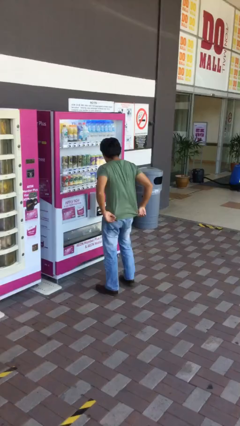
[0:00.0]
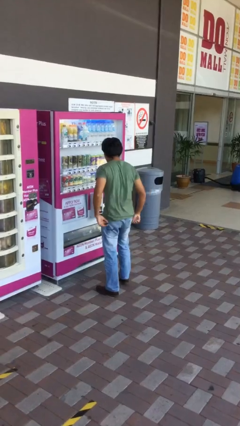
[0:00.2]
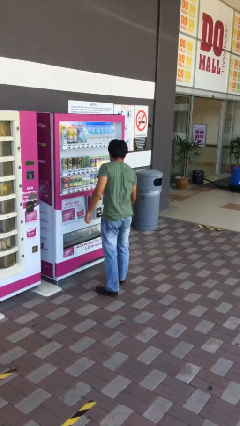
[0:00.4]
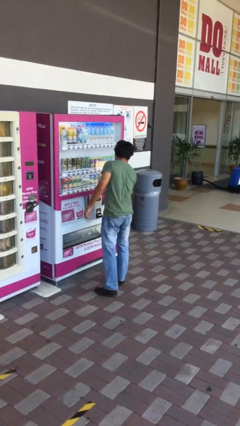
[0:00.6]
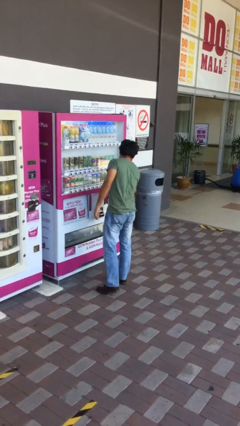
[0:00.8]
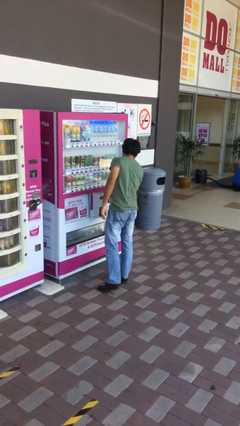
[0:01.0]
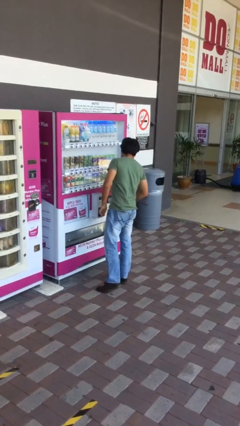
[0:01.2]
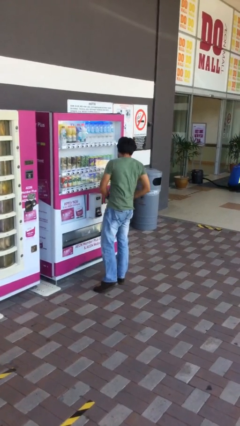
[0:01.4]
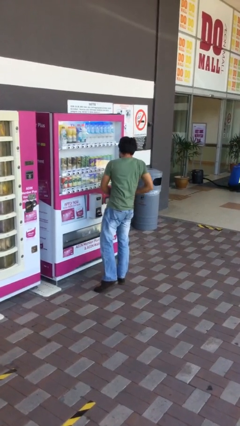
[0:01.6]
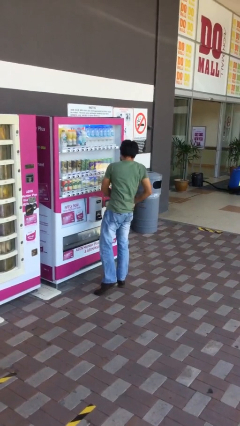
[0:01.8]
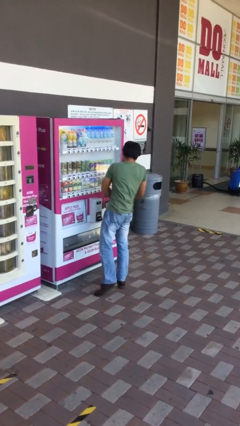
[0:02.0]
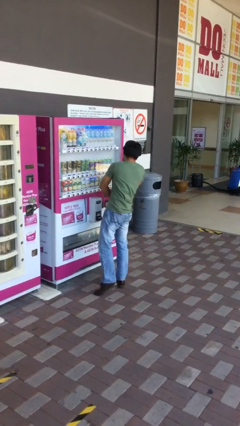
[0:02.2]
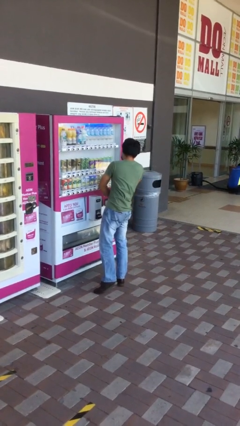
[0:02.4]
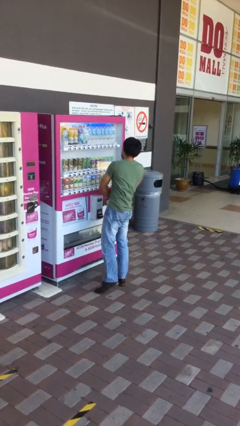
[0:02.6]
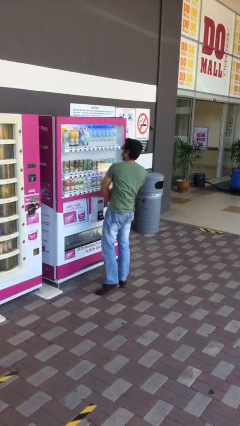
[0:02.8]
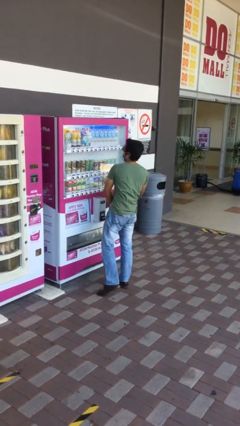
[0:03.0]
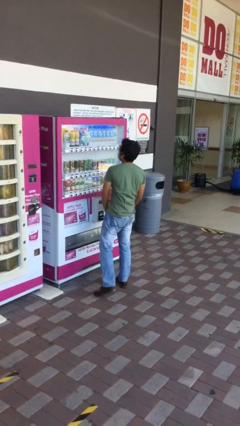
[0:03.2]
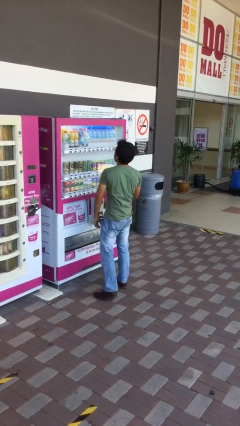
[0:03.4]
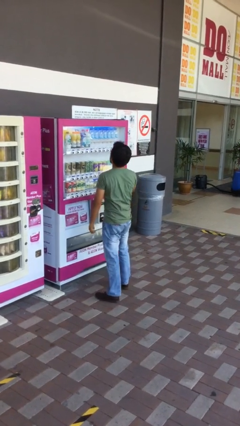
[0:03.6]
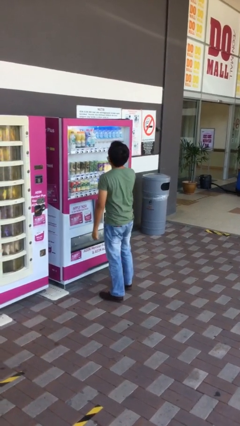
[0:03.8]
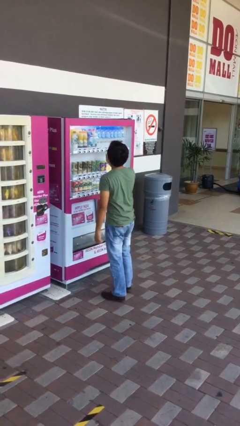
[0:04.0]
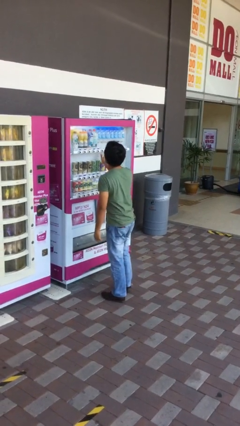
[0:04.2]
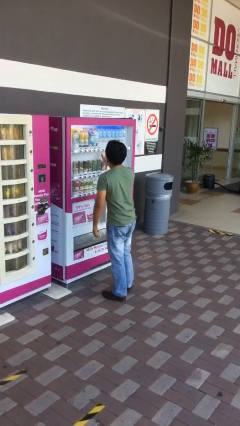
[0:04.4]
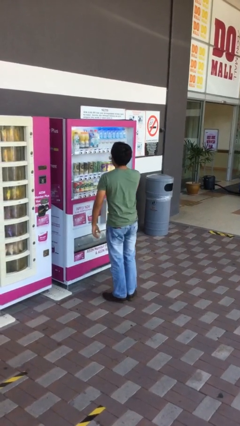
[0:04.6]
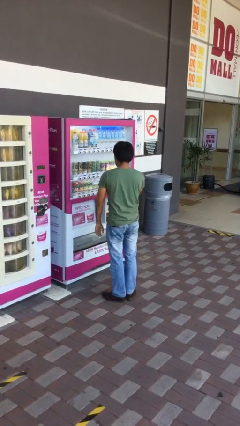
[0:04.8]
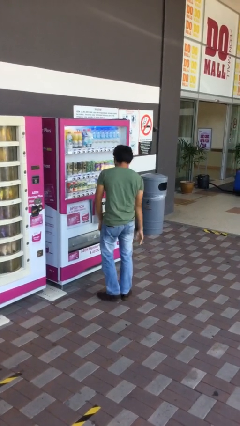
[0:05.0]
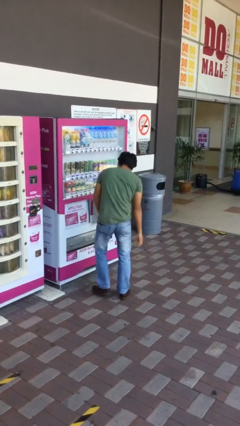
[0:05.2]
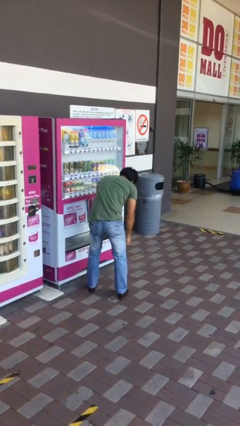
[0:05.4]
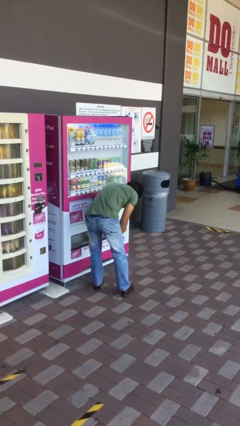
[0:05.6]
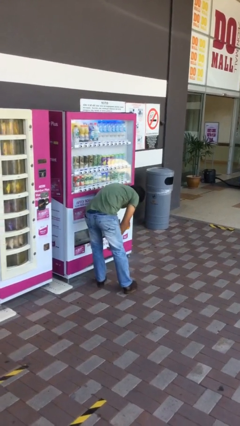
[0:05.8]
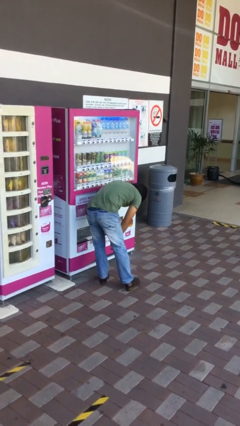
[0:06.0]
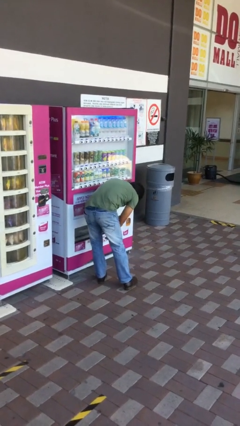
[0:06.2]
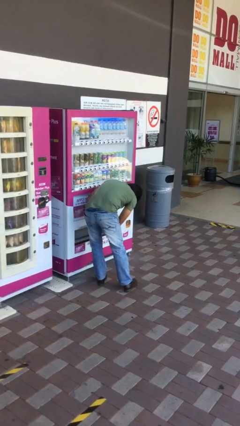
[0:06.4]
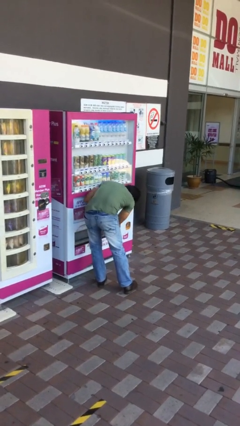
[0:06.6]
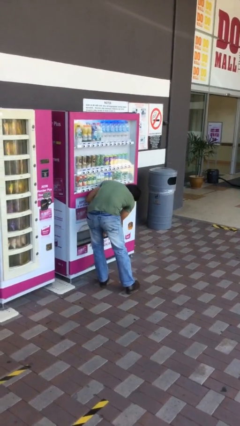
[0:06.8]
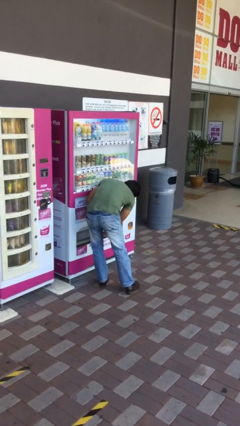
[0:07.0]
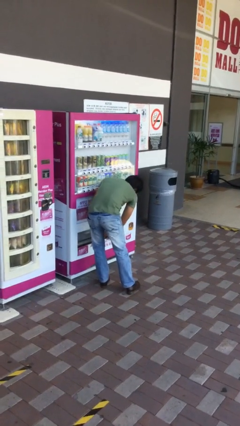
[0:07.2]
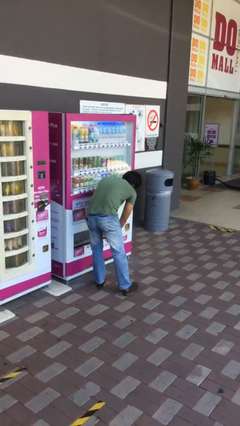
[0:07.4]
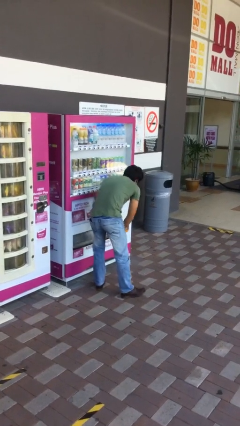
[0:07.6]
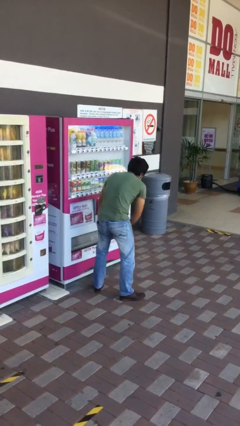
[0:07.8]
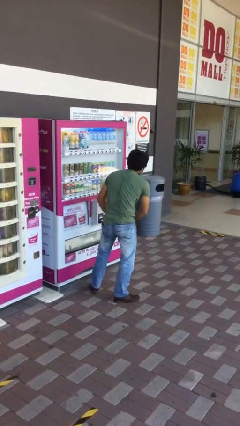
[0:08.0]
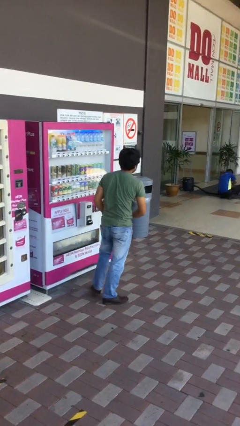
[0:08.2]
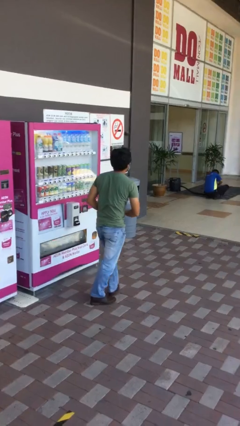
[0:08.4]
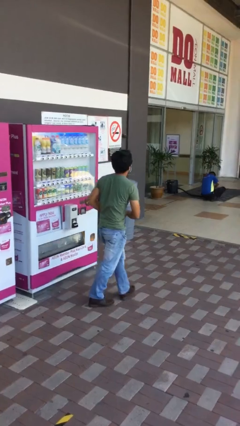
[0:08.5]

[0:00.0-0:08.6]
person purchases from machine

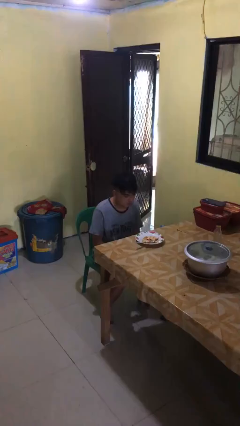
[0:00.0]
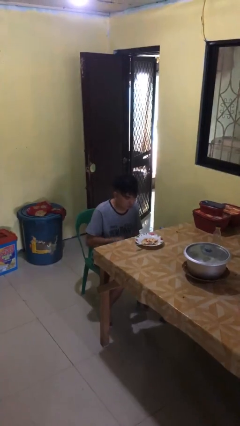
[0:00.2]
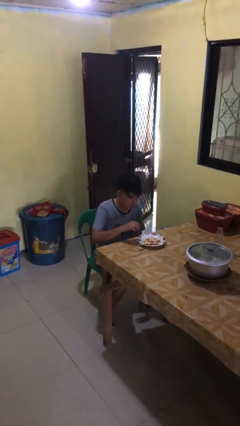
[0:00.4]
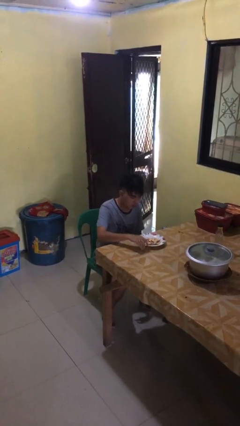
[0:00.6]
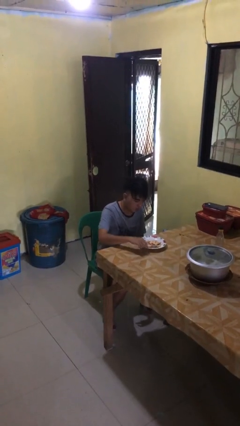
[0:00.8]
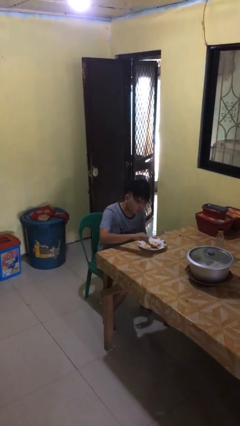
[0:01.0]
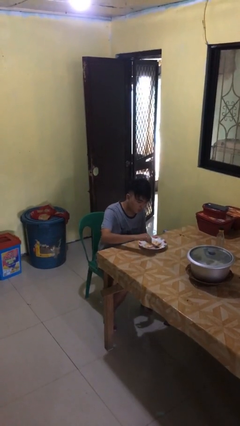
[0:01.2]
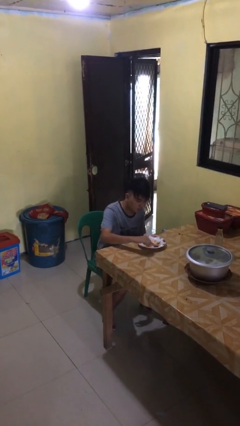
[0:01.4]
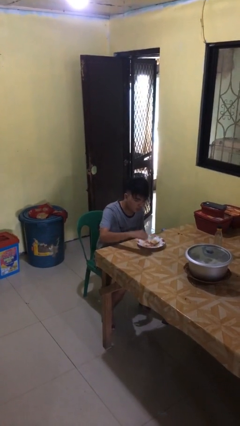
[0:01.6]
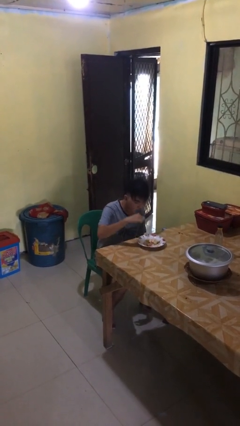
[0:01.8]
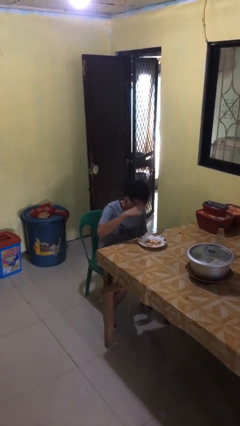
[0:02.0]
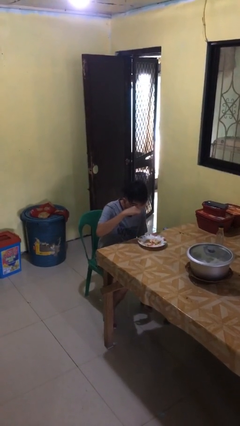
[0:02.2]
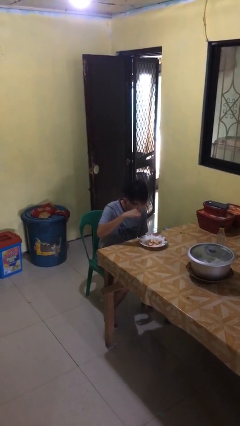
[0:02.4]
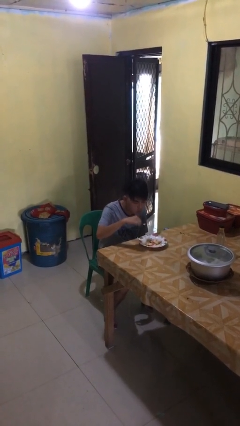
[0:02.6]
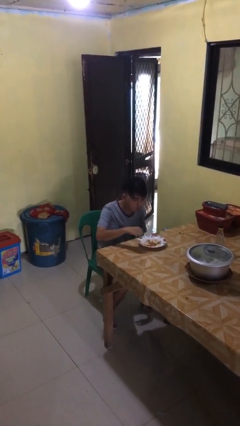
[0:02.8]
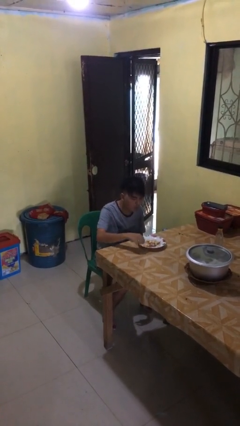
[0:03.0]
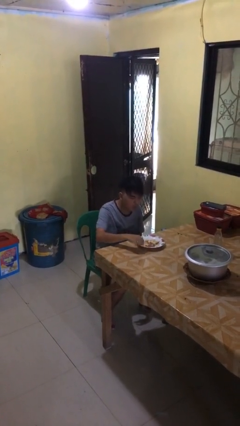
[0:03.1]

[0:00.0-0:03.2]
person eats with utensil

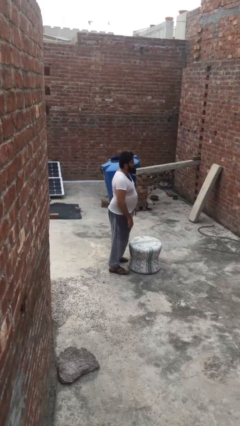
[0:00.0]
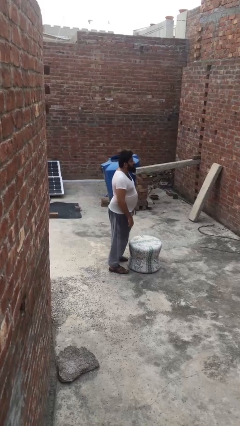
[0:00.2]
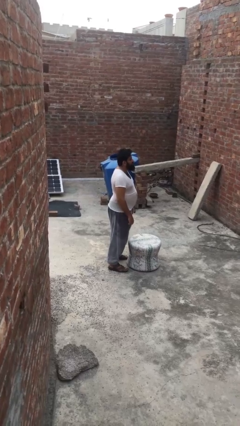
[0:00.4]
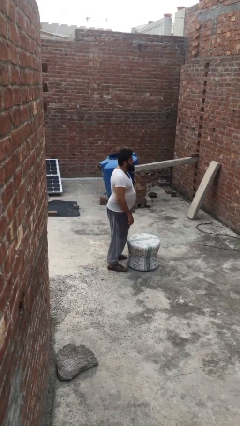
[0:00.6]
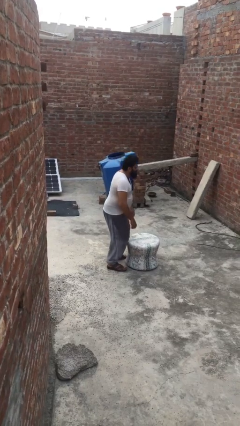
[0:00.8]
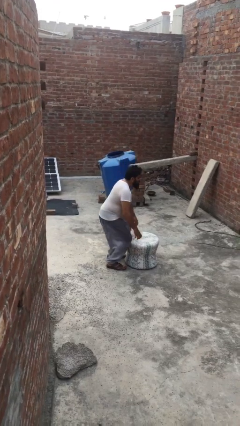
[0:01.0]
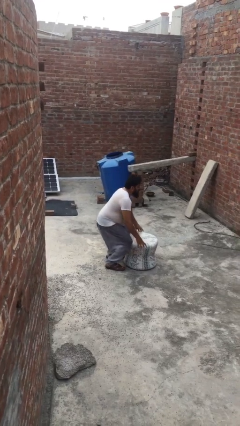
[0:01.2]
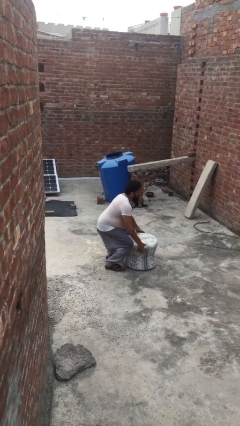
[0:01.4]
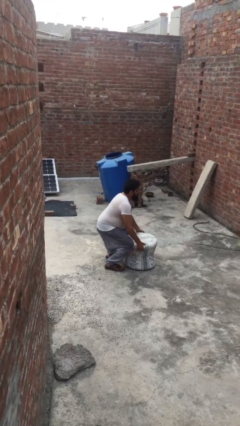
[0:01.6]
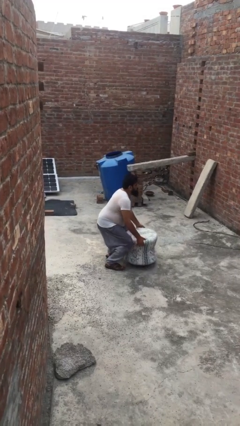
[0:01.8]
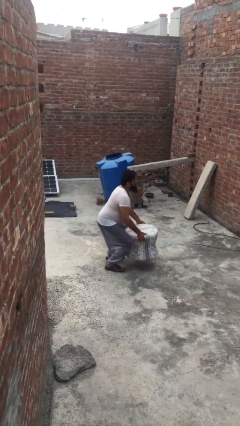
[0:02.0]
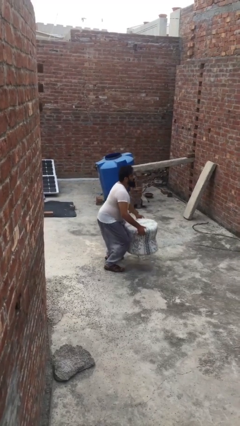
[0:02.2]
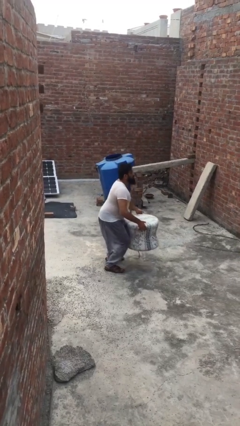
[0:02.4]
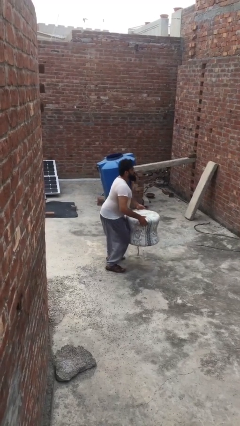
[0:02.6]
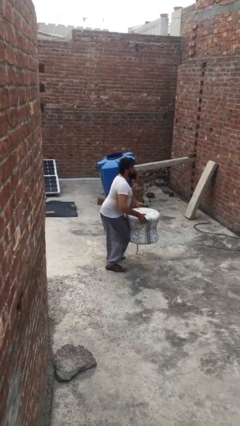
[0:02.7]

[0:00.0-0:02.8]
person picks up object from floor

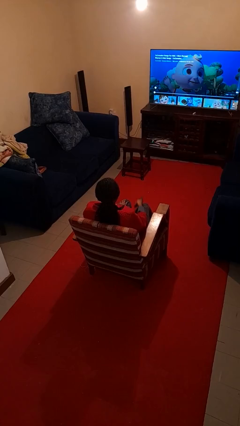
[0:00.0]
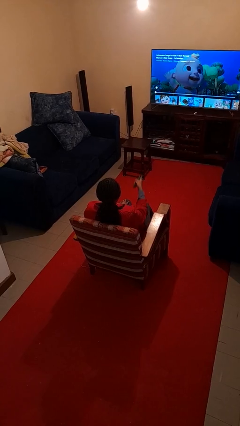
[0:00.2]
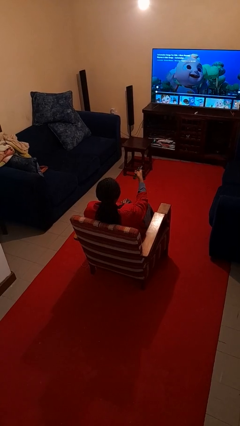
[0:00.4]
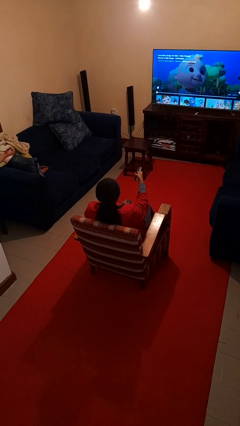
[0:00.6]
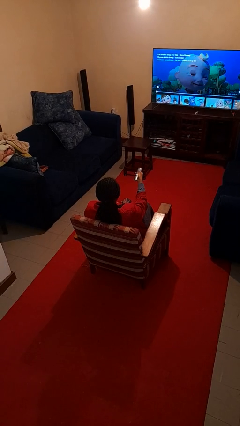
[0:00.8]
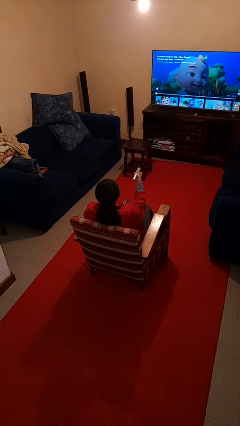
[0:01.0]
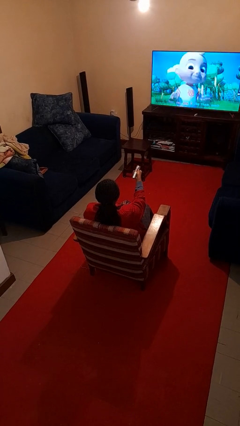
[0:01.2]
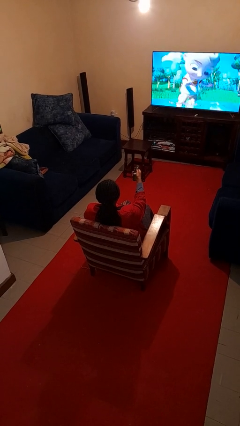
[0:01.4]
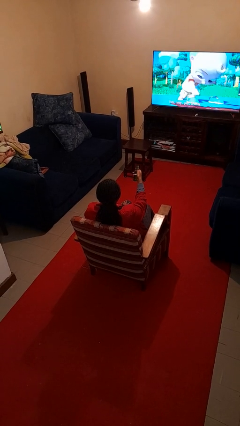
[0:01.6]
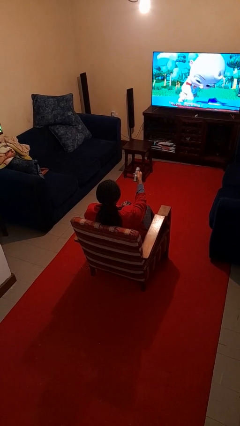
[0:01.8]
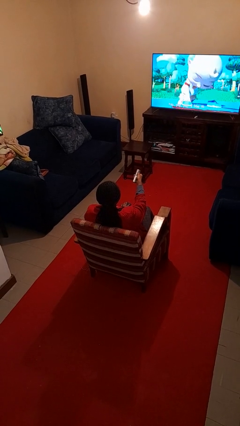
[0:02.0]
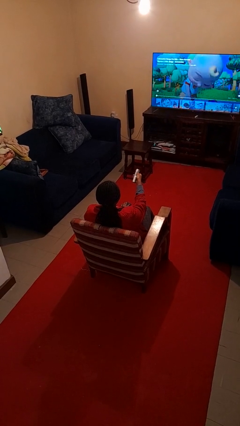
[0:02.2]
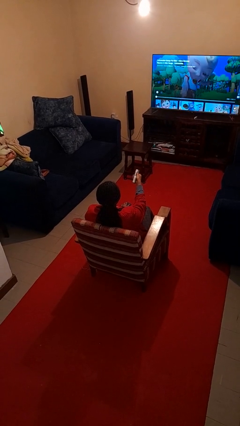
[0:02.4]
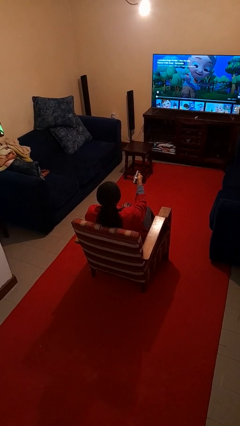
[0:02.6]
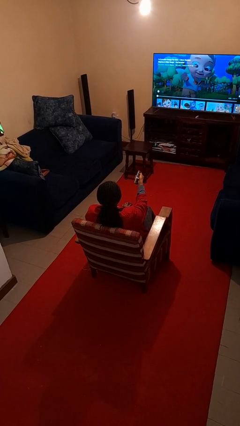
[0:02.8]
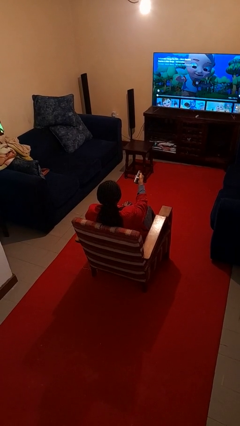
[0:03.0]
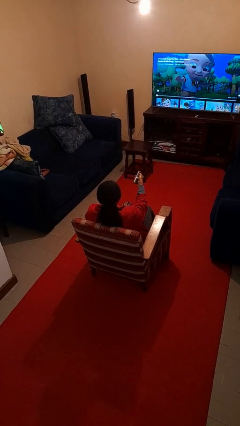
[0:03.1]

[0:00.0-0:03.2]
person uses television remote
